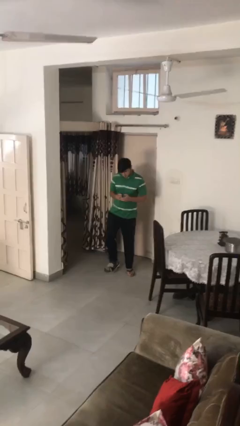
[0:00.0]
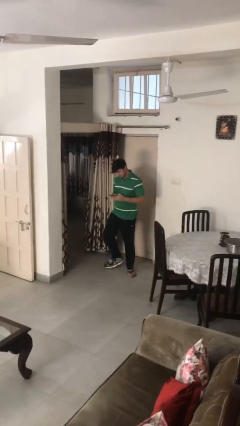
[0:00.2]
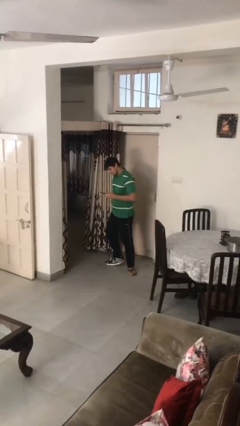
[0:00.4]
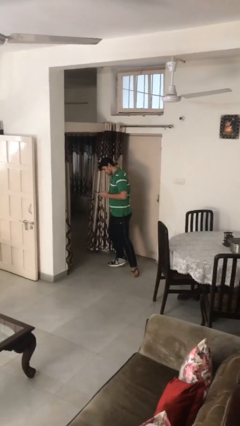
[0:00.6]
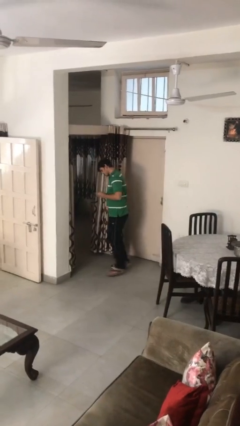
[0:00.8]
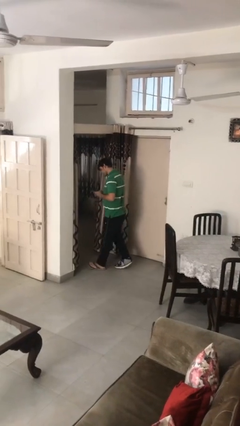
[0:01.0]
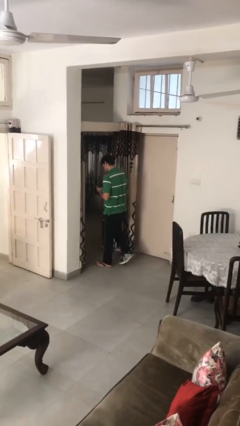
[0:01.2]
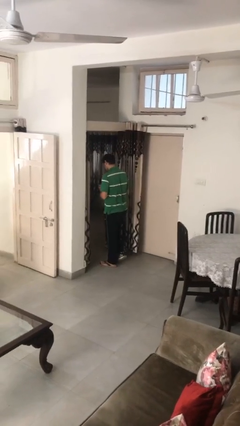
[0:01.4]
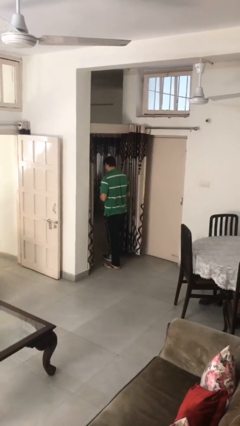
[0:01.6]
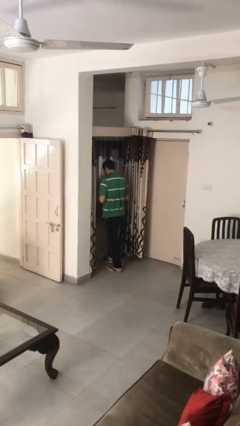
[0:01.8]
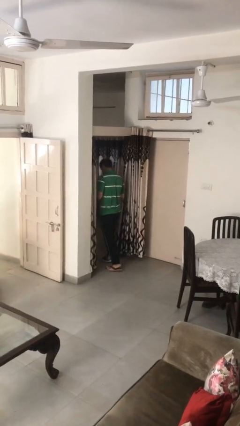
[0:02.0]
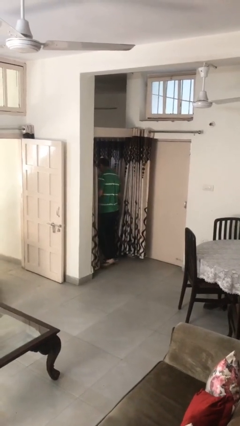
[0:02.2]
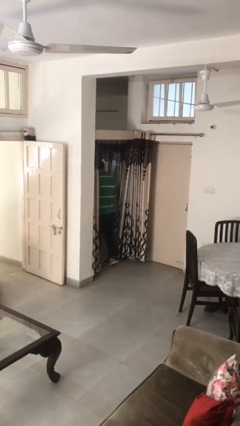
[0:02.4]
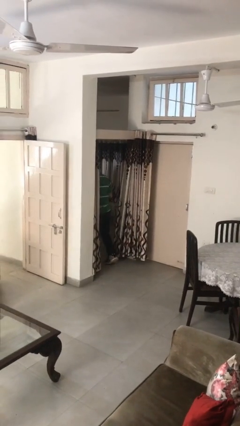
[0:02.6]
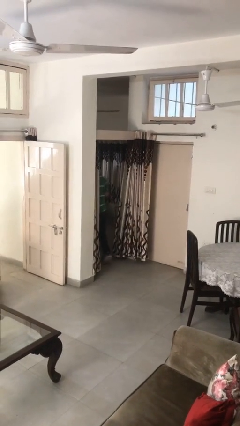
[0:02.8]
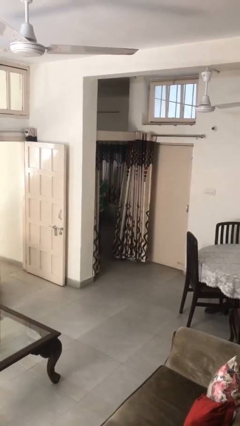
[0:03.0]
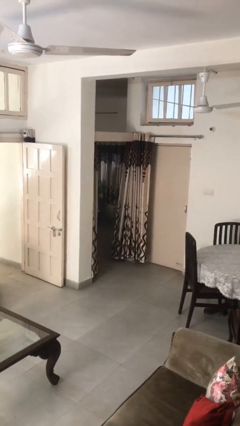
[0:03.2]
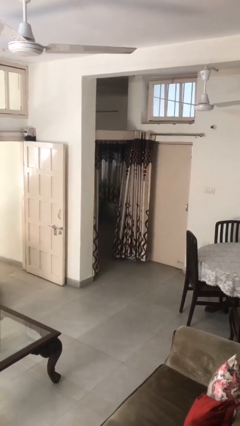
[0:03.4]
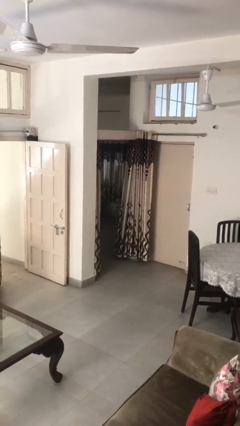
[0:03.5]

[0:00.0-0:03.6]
person exits scene through structure

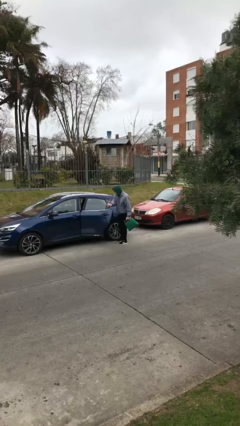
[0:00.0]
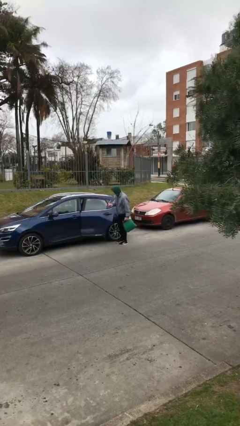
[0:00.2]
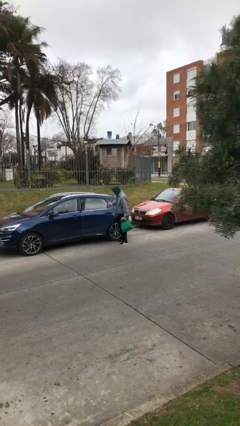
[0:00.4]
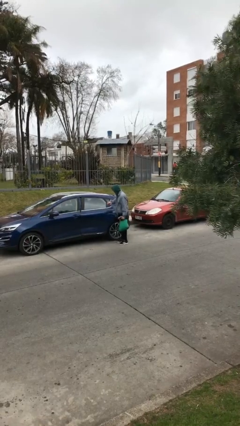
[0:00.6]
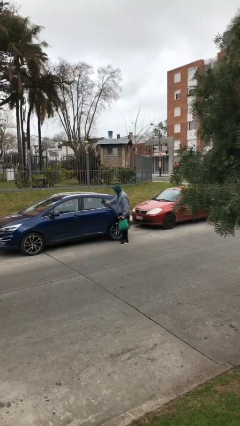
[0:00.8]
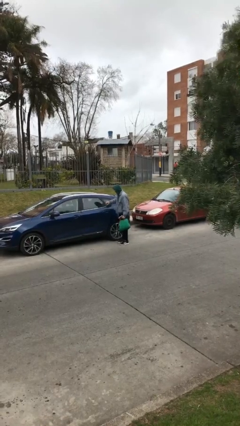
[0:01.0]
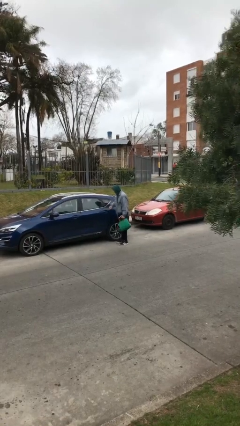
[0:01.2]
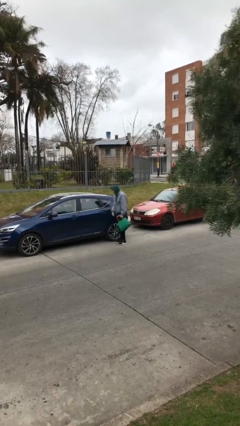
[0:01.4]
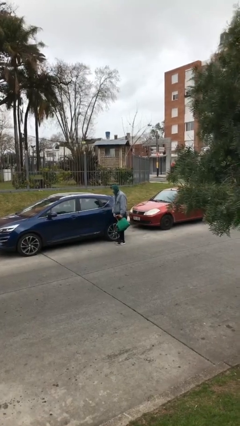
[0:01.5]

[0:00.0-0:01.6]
person closes car door

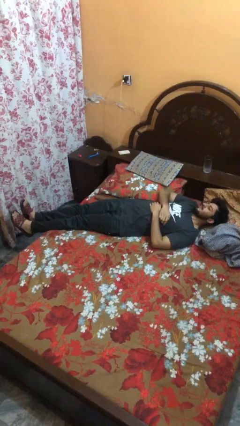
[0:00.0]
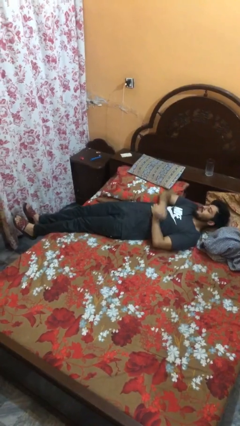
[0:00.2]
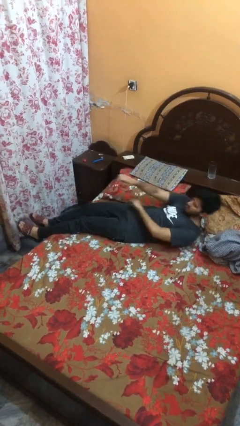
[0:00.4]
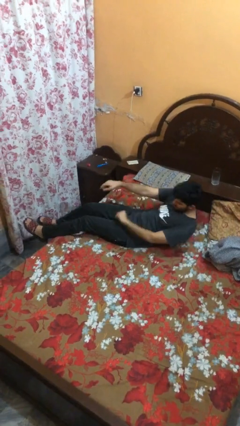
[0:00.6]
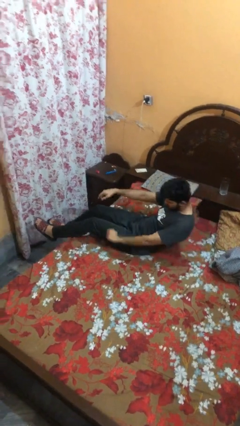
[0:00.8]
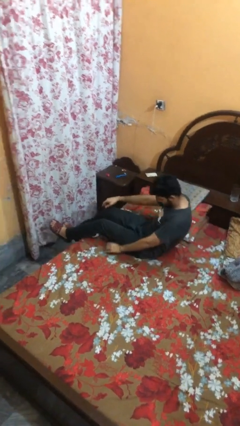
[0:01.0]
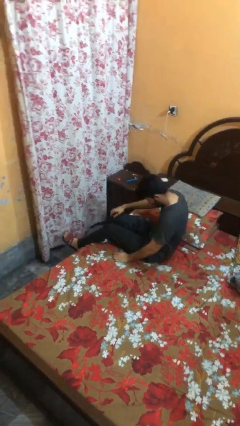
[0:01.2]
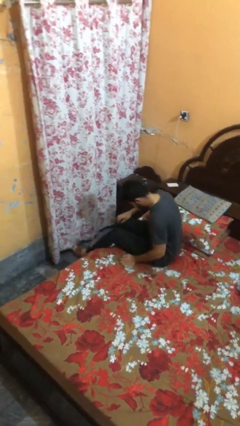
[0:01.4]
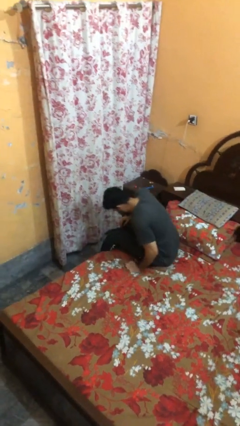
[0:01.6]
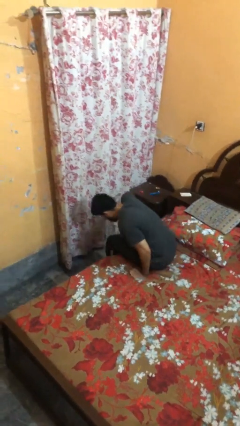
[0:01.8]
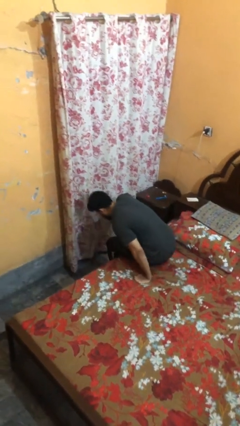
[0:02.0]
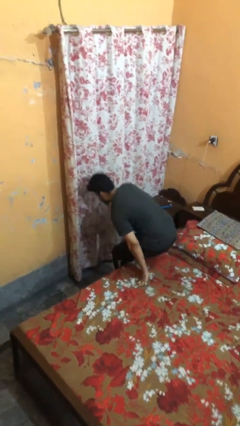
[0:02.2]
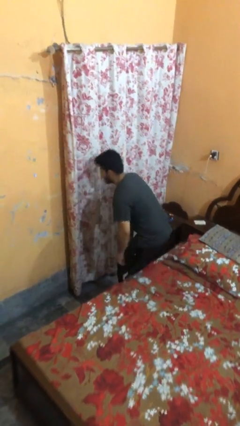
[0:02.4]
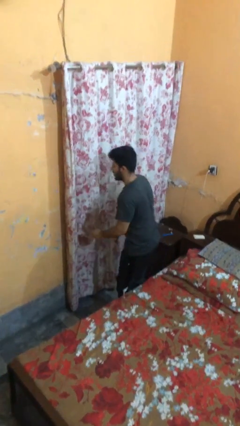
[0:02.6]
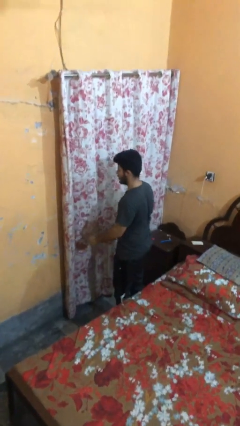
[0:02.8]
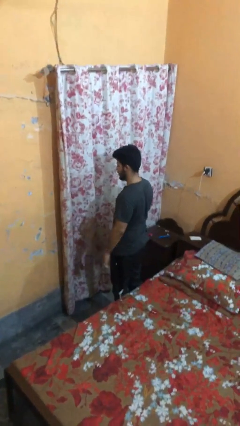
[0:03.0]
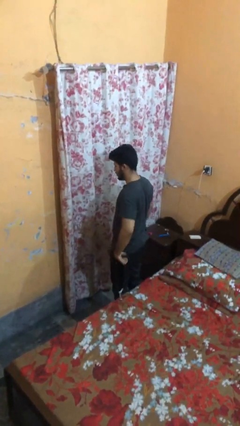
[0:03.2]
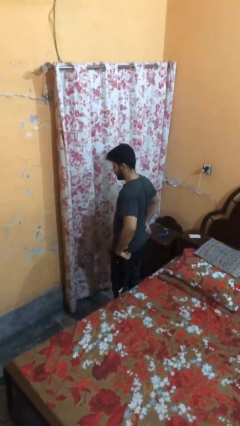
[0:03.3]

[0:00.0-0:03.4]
person stands up

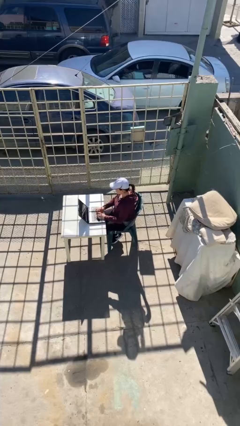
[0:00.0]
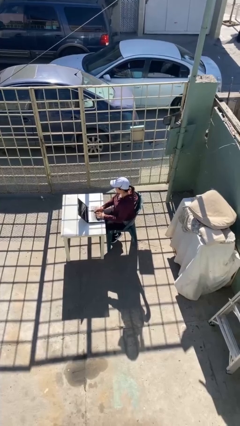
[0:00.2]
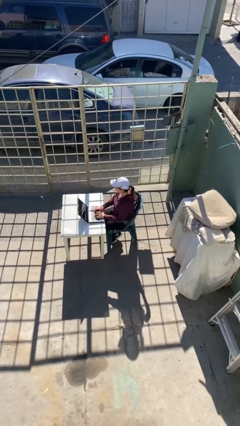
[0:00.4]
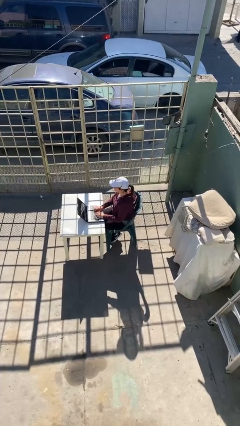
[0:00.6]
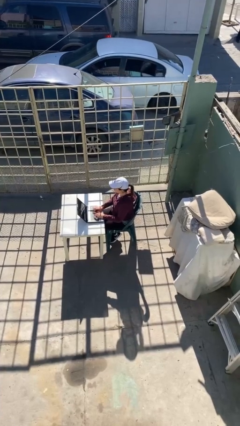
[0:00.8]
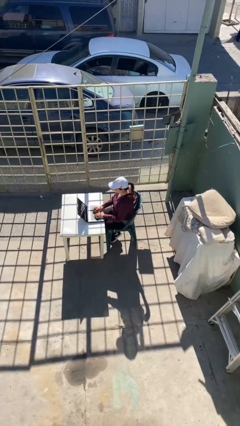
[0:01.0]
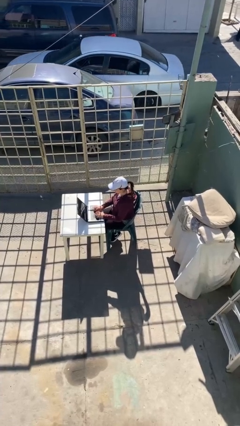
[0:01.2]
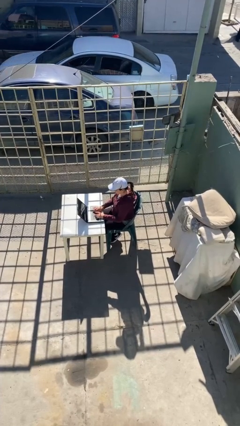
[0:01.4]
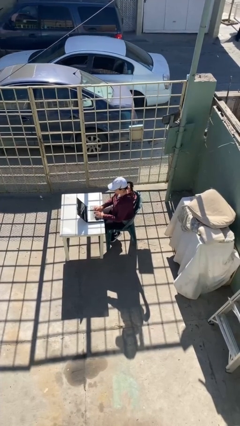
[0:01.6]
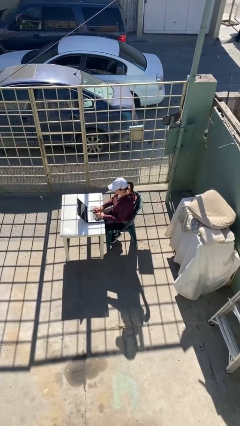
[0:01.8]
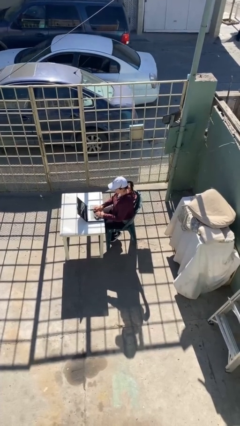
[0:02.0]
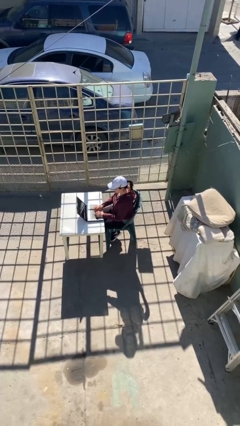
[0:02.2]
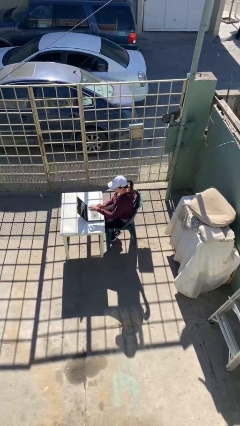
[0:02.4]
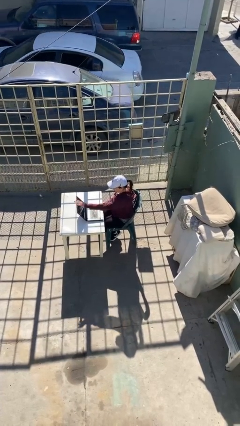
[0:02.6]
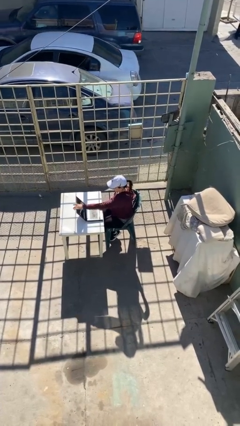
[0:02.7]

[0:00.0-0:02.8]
person interacts with laptop

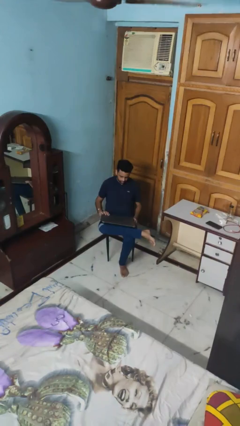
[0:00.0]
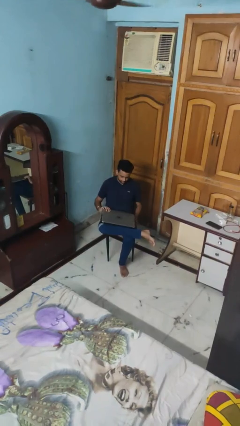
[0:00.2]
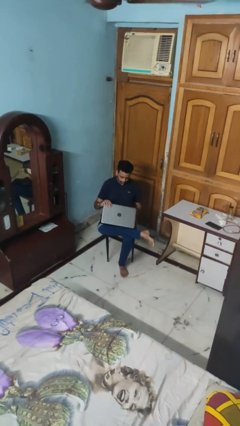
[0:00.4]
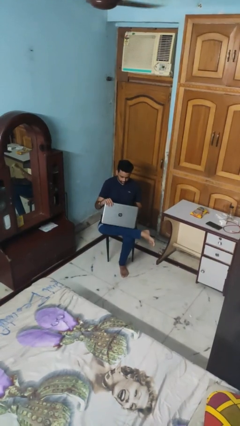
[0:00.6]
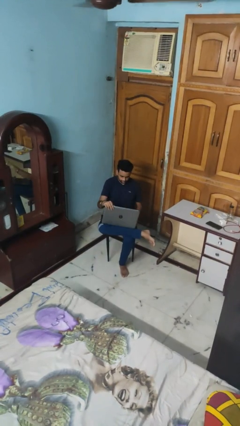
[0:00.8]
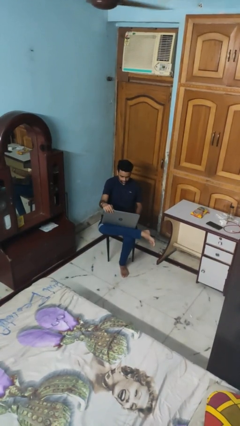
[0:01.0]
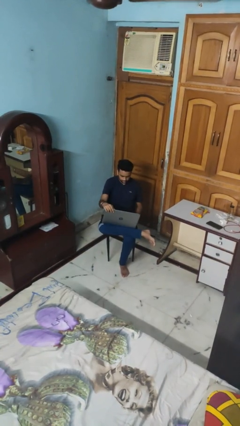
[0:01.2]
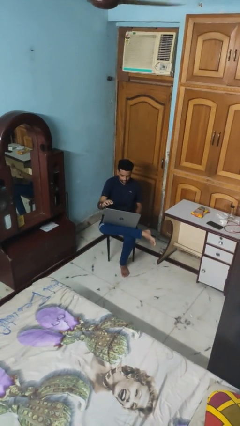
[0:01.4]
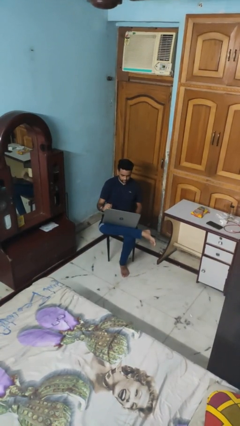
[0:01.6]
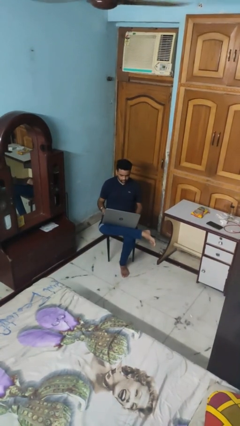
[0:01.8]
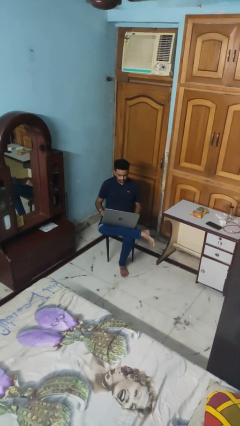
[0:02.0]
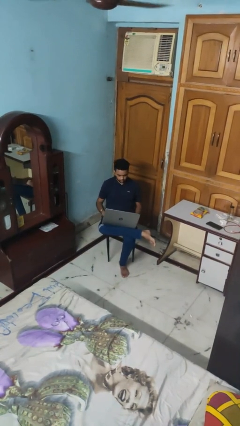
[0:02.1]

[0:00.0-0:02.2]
person opens laptop

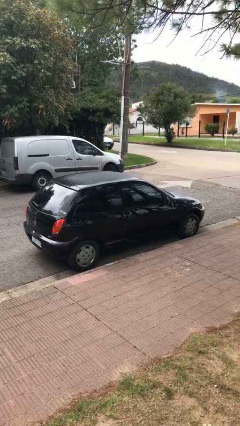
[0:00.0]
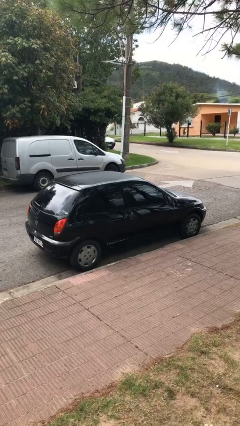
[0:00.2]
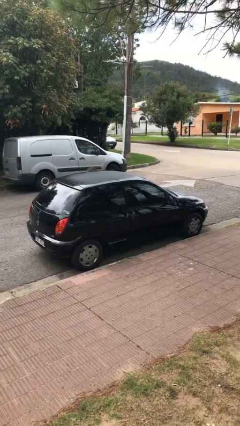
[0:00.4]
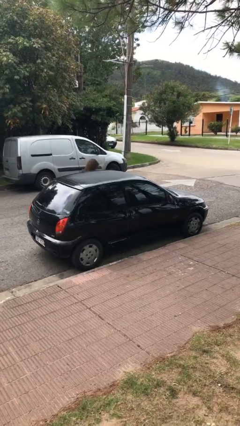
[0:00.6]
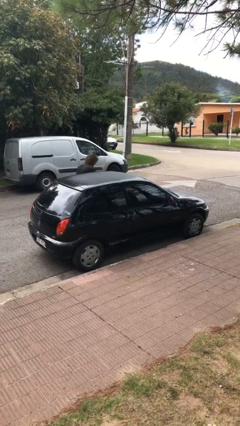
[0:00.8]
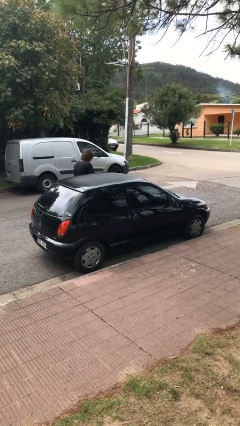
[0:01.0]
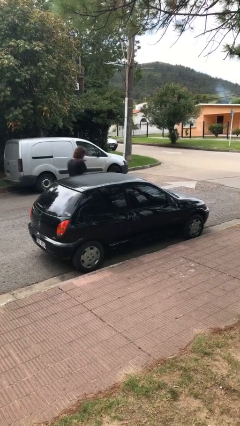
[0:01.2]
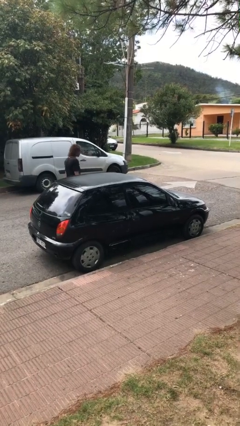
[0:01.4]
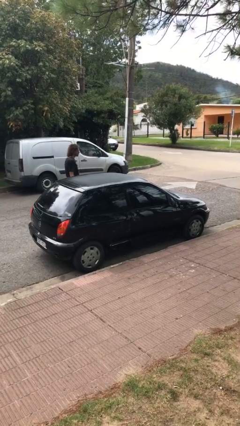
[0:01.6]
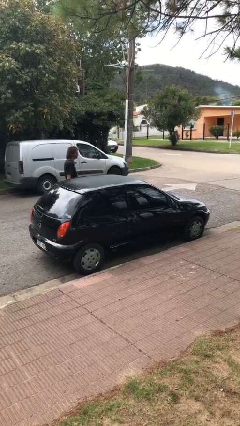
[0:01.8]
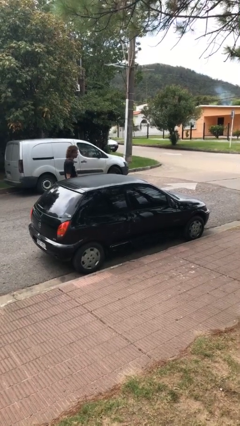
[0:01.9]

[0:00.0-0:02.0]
car drops off person

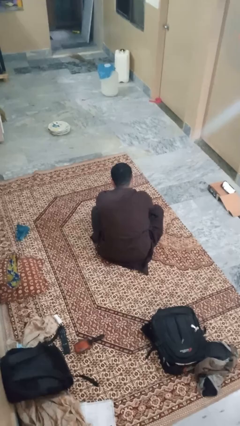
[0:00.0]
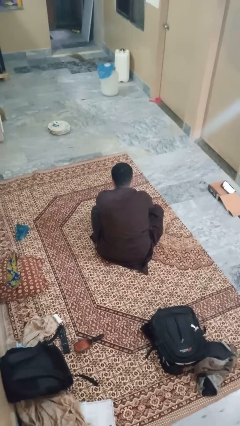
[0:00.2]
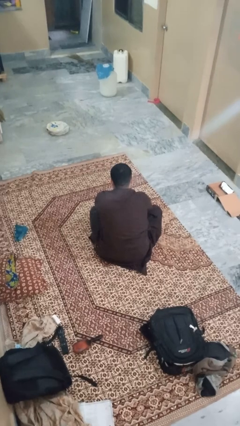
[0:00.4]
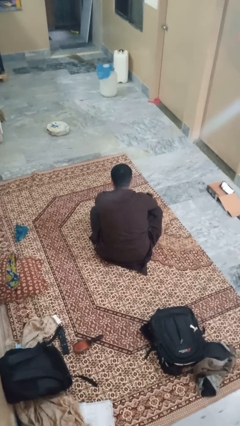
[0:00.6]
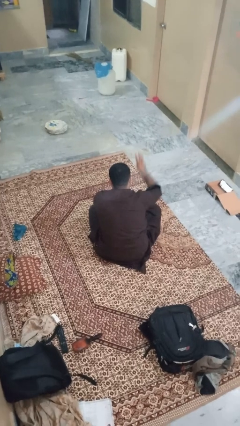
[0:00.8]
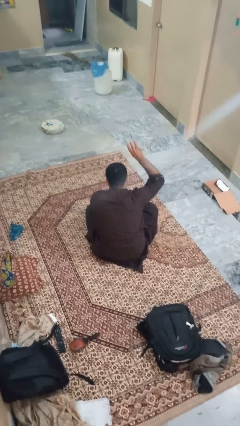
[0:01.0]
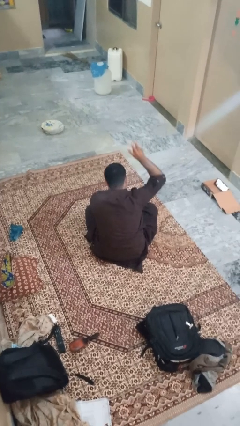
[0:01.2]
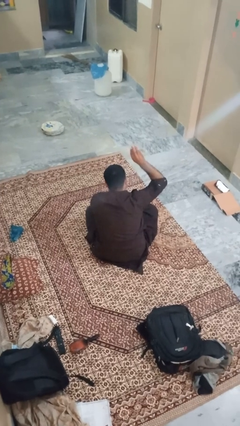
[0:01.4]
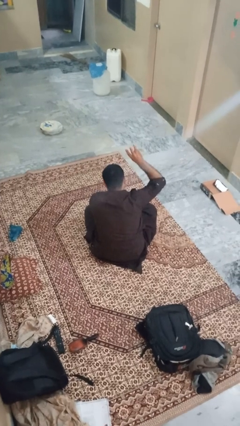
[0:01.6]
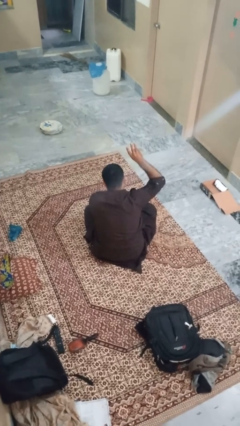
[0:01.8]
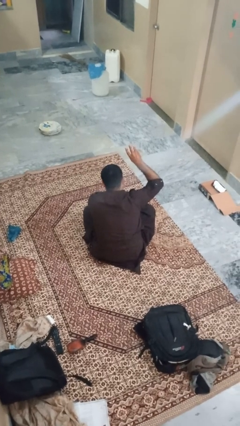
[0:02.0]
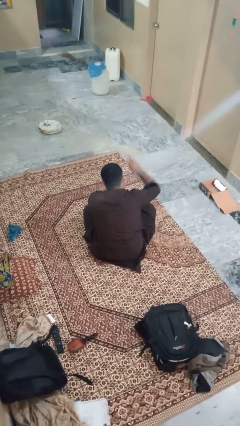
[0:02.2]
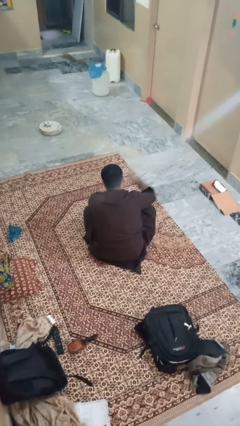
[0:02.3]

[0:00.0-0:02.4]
person gestures number three
